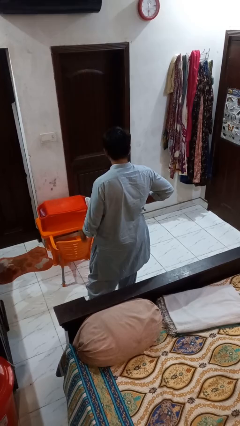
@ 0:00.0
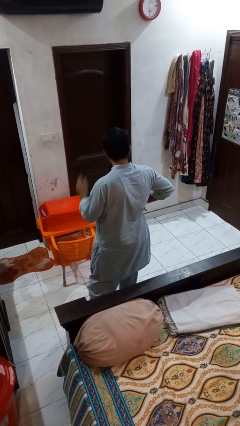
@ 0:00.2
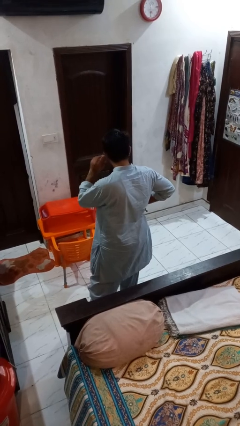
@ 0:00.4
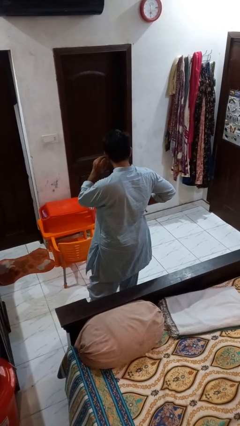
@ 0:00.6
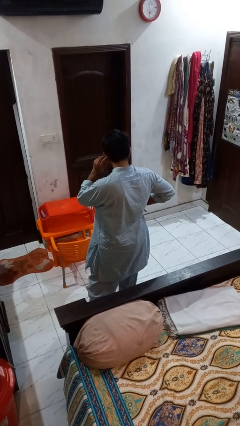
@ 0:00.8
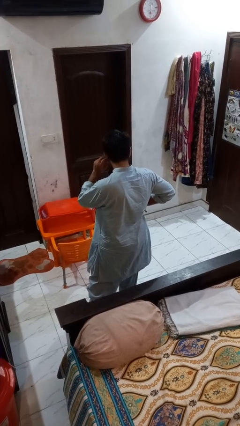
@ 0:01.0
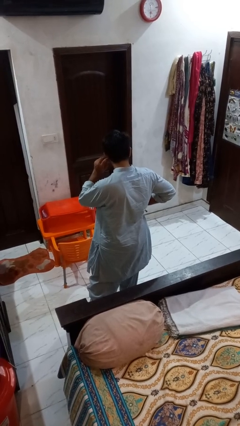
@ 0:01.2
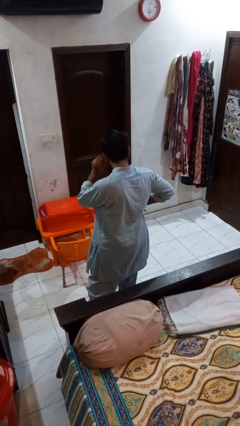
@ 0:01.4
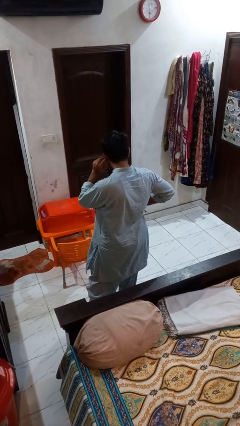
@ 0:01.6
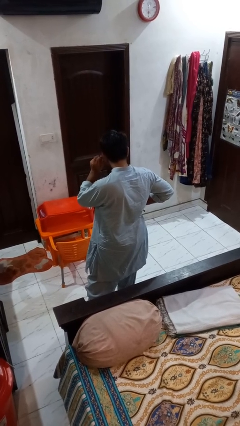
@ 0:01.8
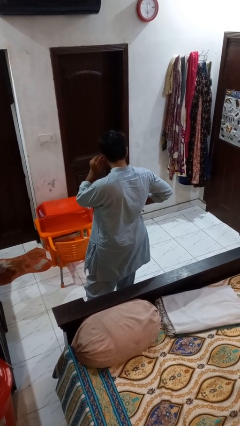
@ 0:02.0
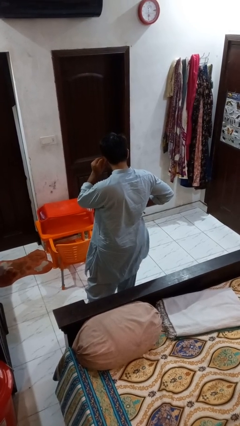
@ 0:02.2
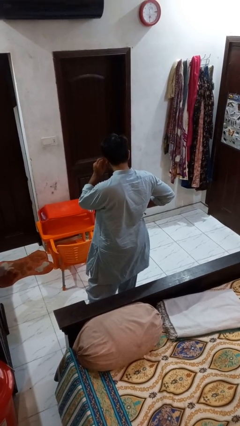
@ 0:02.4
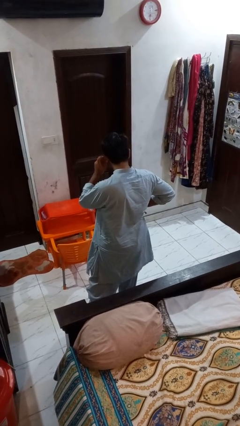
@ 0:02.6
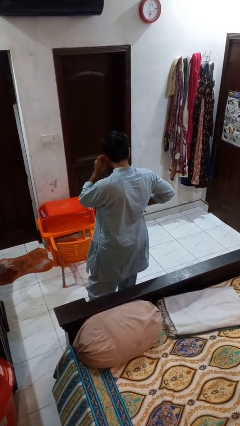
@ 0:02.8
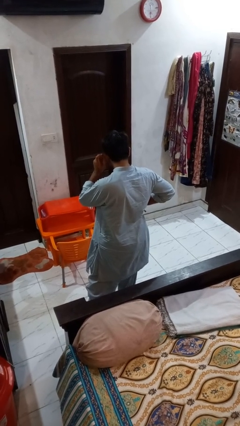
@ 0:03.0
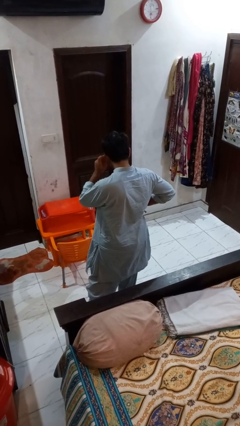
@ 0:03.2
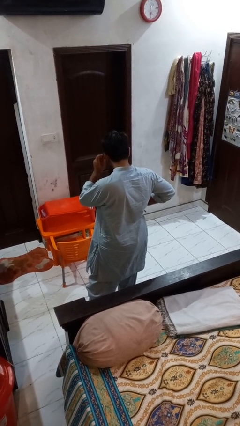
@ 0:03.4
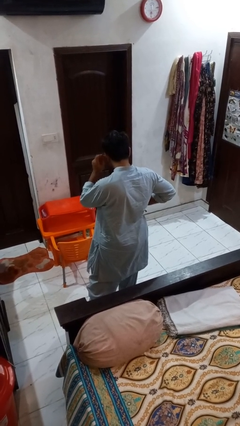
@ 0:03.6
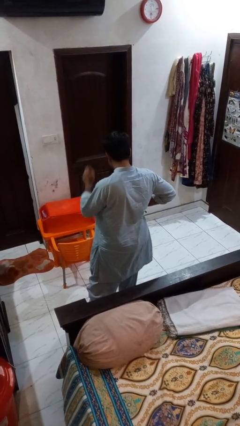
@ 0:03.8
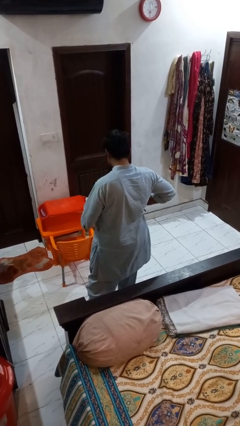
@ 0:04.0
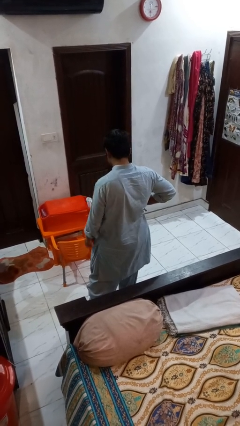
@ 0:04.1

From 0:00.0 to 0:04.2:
person touches earlobe

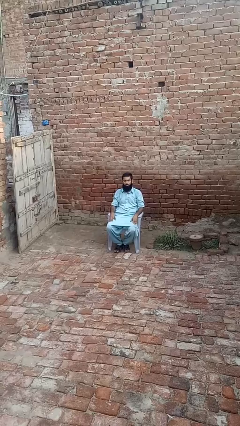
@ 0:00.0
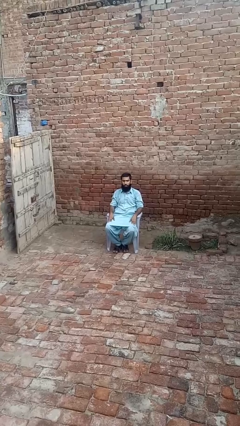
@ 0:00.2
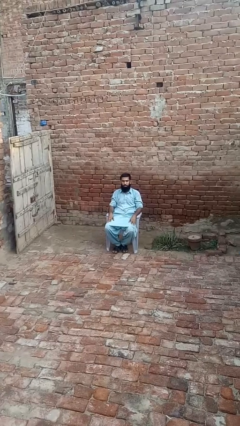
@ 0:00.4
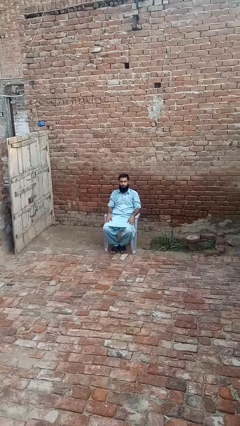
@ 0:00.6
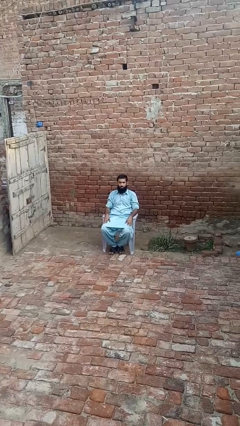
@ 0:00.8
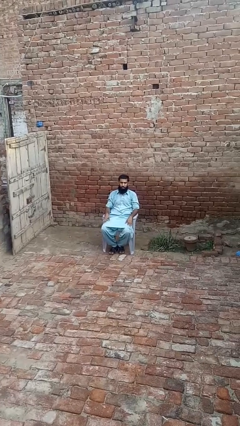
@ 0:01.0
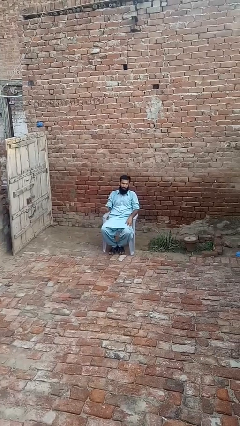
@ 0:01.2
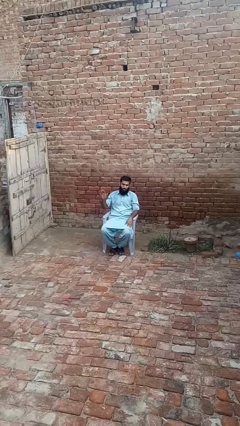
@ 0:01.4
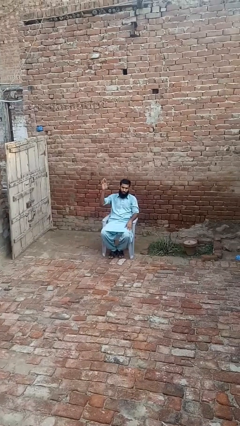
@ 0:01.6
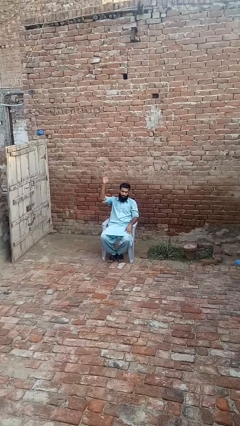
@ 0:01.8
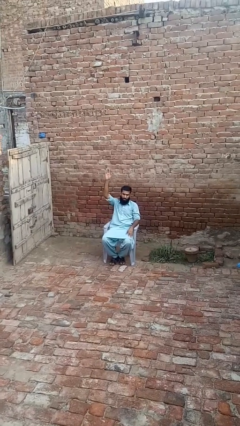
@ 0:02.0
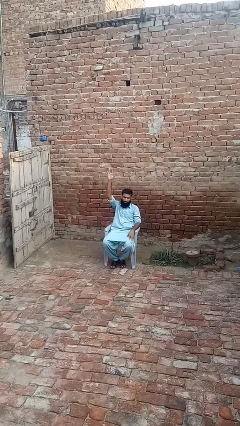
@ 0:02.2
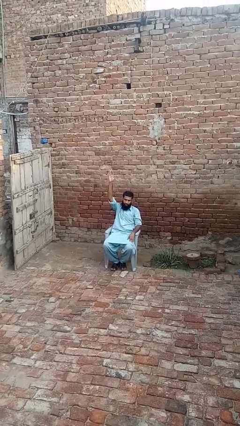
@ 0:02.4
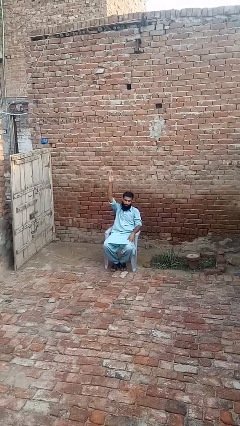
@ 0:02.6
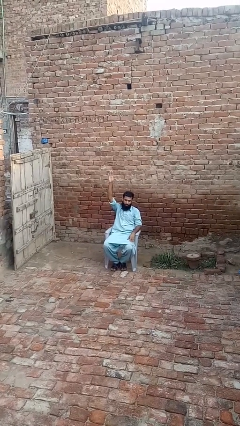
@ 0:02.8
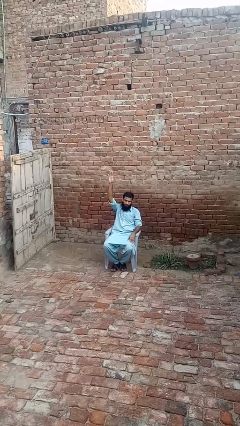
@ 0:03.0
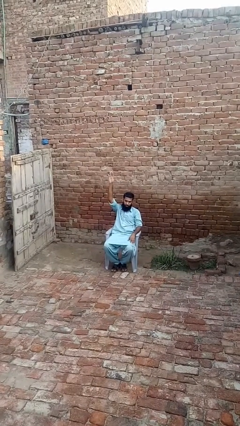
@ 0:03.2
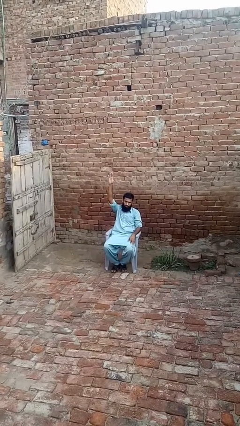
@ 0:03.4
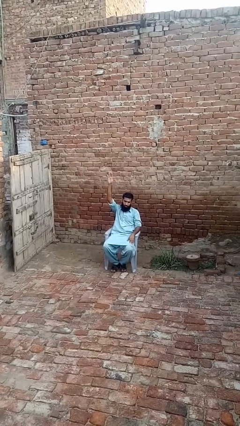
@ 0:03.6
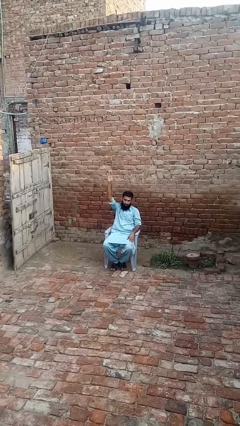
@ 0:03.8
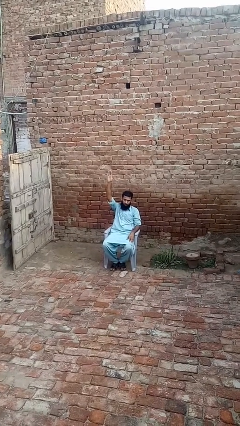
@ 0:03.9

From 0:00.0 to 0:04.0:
person gestures raise hand

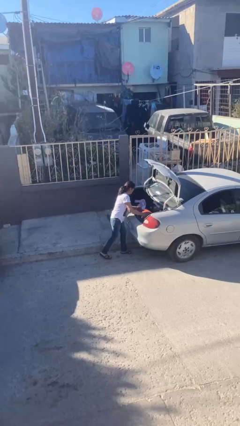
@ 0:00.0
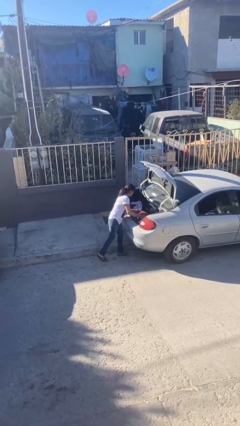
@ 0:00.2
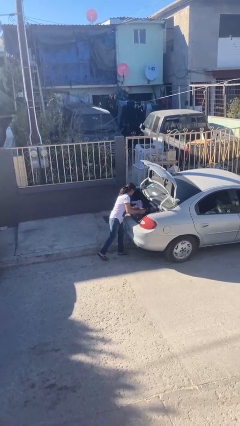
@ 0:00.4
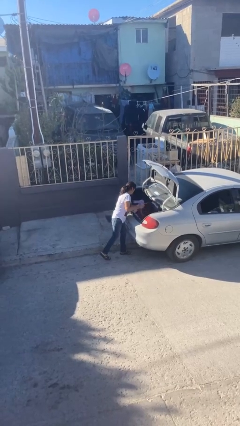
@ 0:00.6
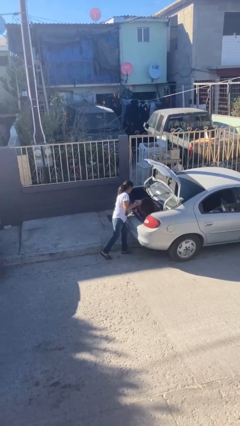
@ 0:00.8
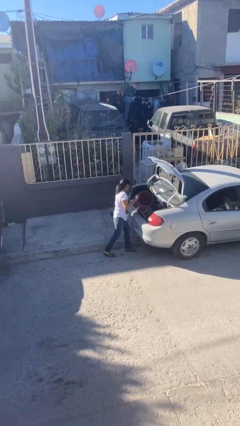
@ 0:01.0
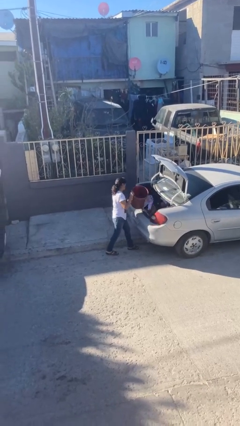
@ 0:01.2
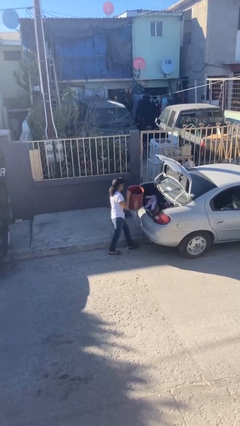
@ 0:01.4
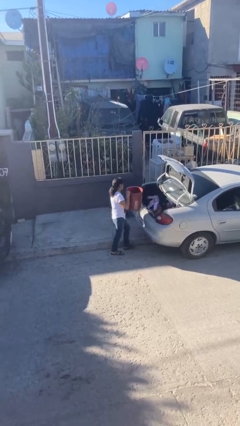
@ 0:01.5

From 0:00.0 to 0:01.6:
person unloads car

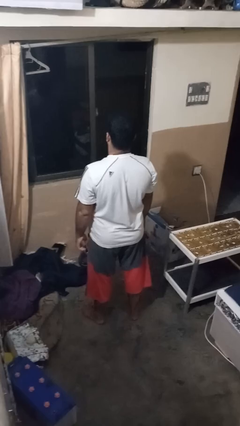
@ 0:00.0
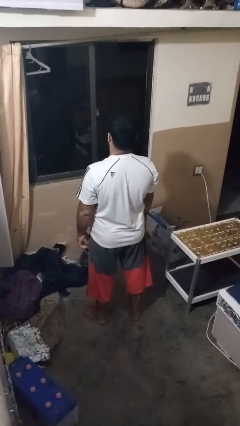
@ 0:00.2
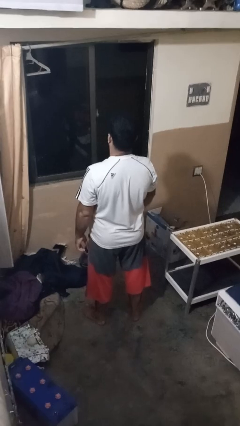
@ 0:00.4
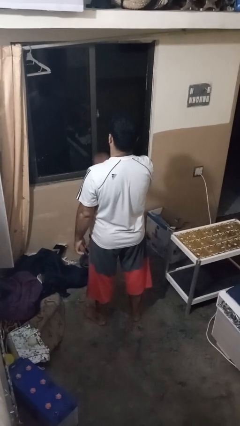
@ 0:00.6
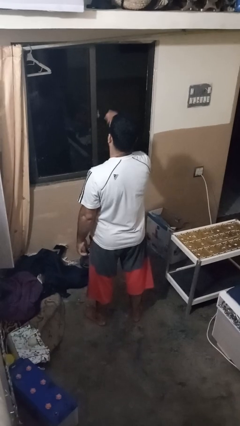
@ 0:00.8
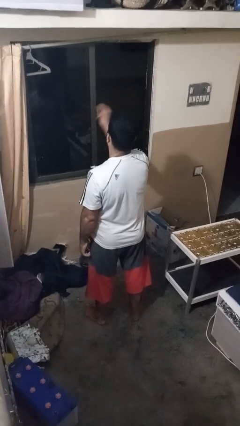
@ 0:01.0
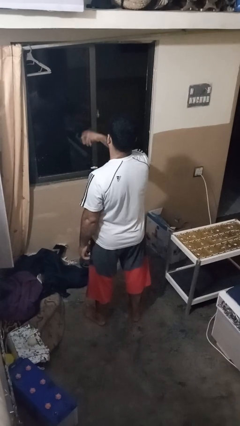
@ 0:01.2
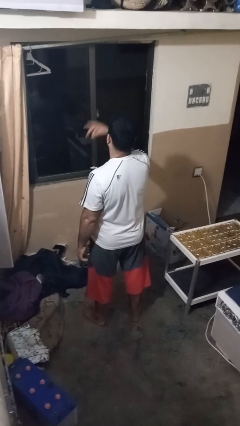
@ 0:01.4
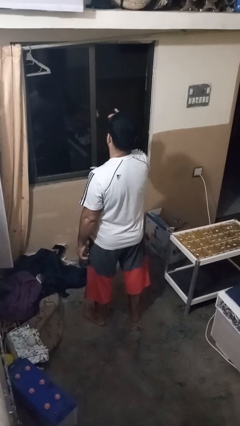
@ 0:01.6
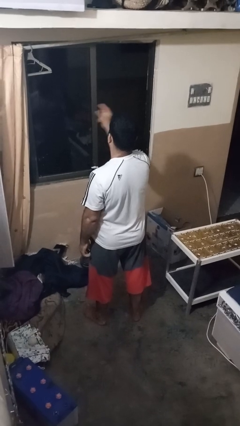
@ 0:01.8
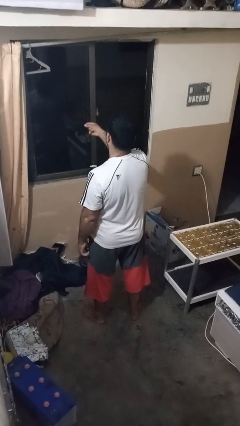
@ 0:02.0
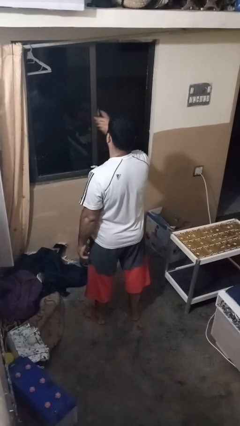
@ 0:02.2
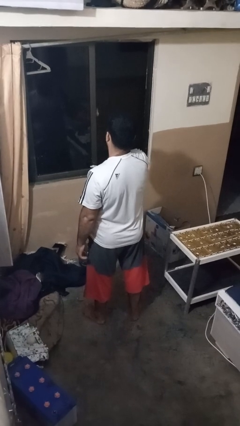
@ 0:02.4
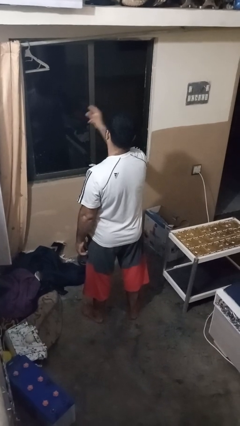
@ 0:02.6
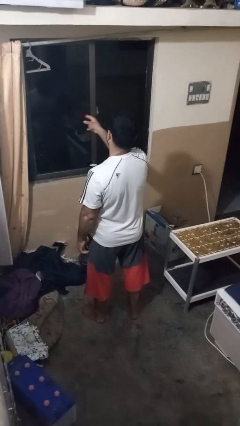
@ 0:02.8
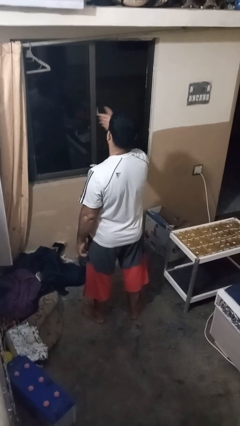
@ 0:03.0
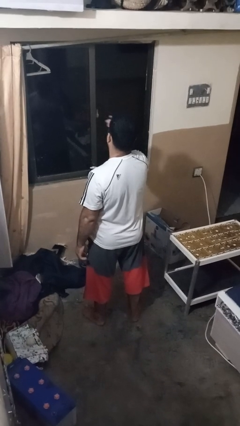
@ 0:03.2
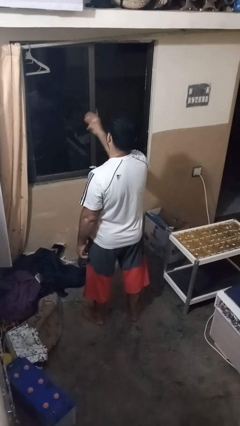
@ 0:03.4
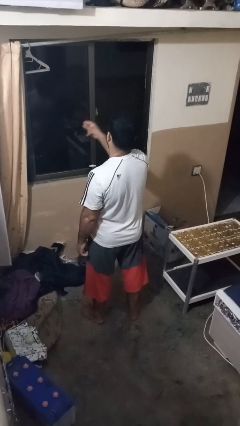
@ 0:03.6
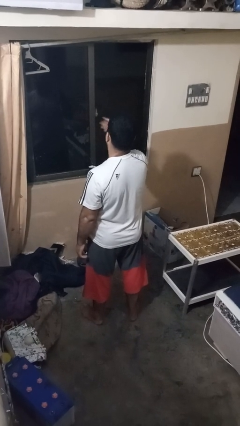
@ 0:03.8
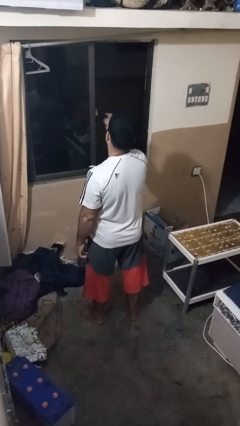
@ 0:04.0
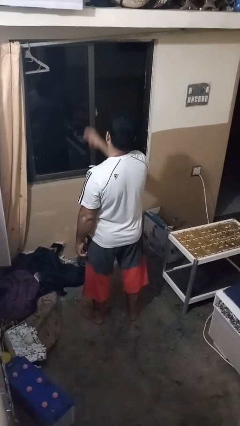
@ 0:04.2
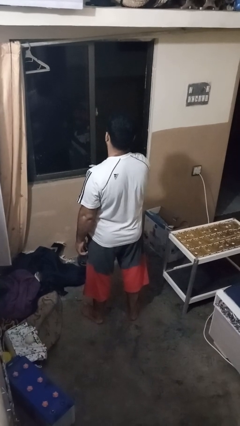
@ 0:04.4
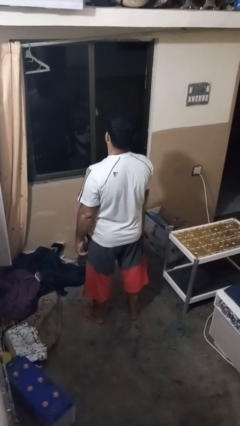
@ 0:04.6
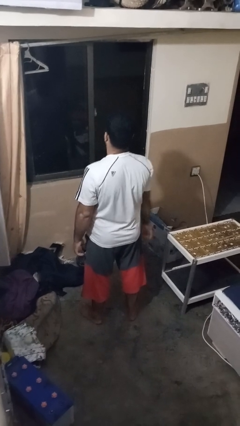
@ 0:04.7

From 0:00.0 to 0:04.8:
person snaps fingers

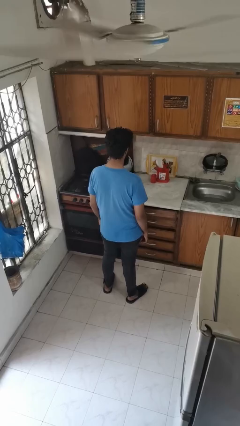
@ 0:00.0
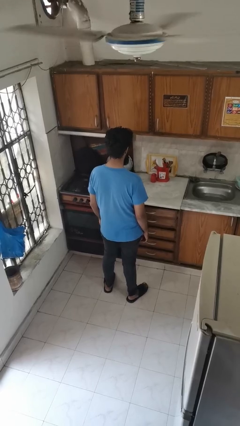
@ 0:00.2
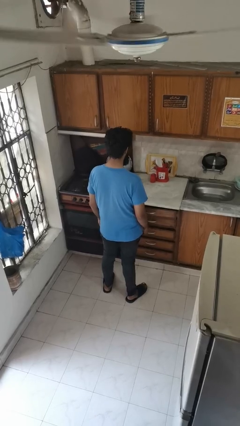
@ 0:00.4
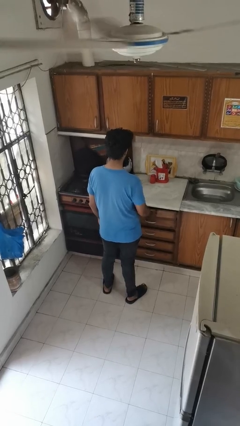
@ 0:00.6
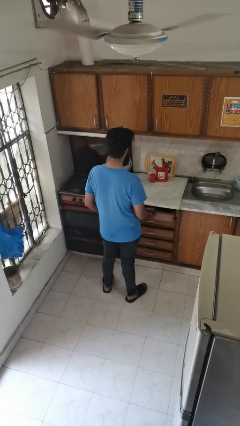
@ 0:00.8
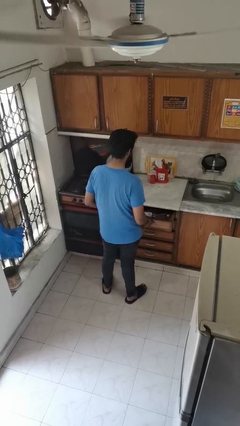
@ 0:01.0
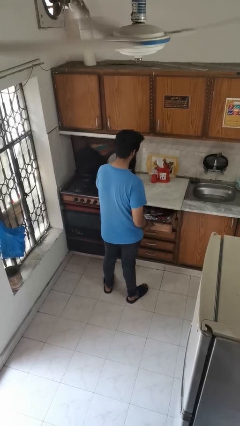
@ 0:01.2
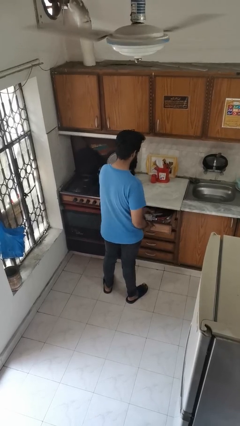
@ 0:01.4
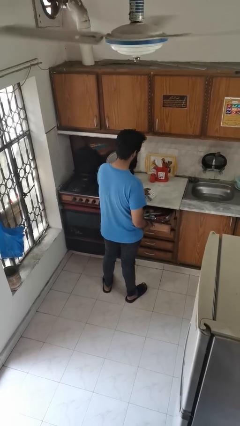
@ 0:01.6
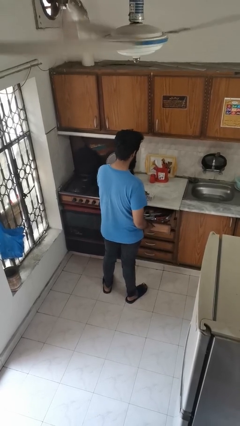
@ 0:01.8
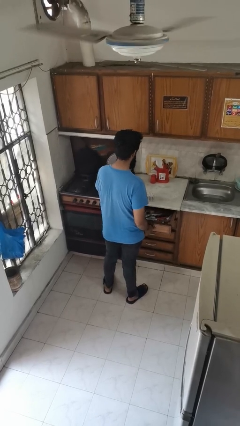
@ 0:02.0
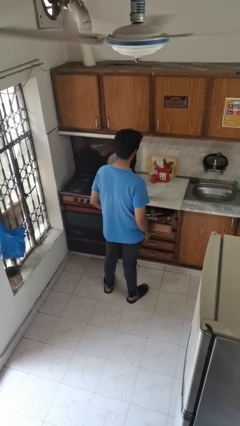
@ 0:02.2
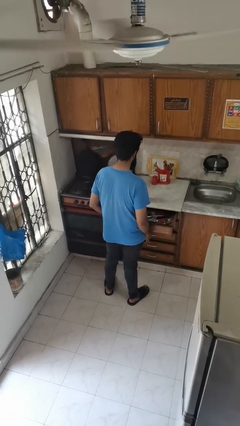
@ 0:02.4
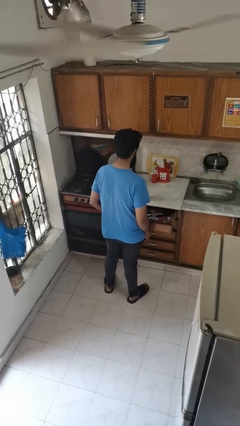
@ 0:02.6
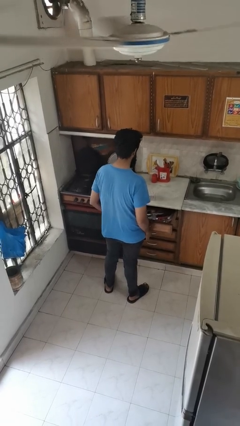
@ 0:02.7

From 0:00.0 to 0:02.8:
person takes object from kitchen drawer
